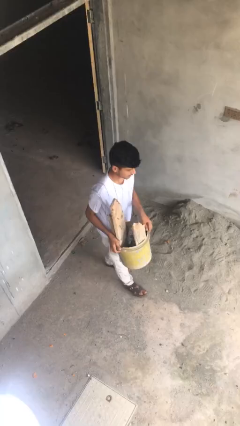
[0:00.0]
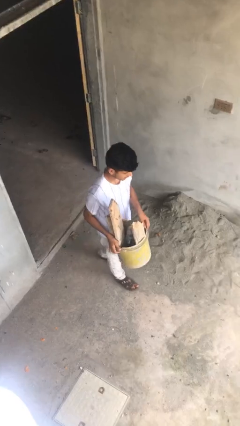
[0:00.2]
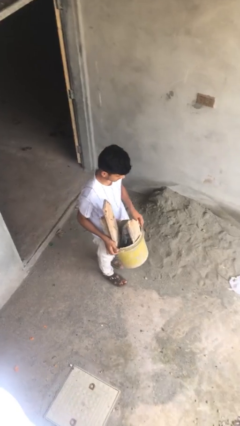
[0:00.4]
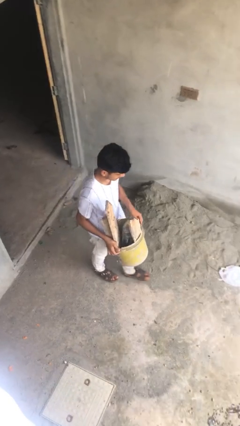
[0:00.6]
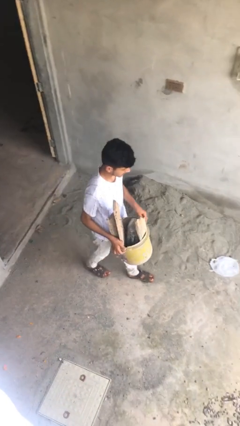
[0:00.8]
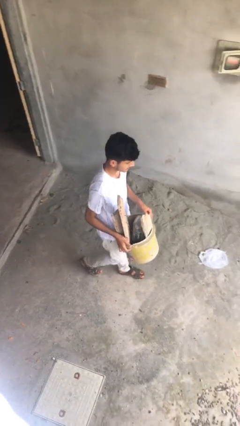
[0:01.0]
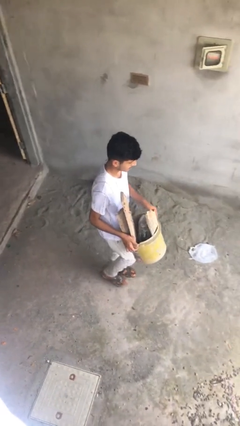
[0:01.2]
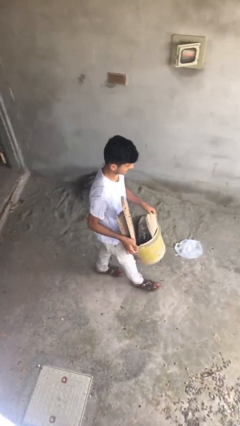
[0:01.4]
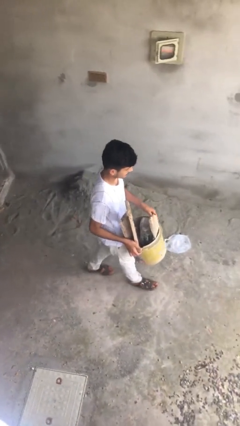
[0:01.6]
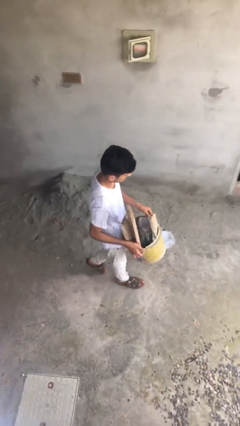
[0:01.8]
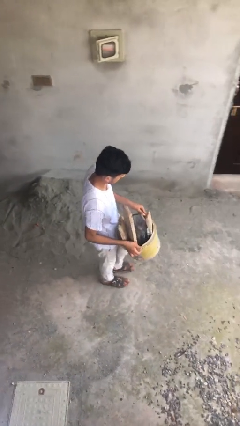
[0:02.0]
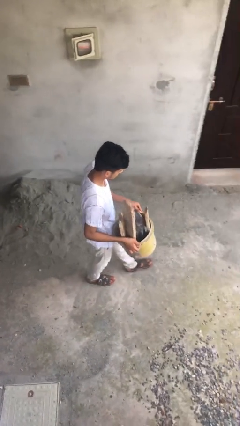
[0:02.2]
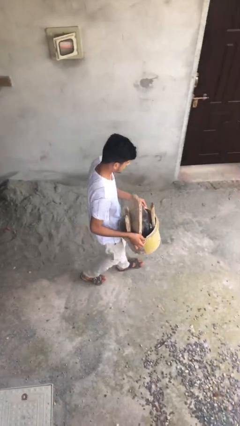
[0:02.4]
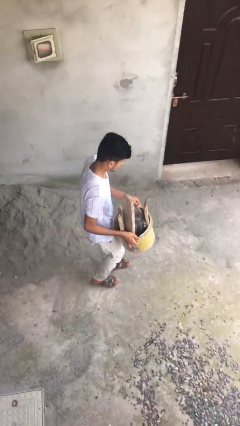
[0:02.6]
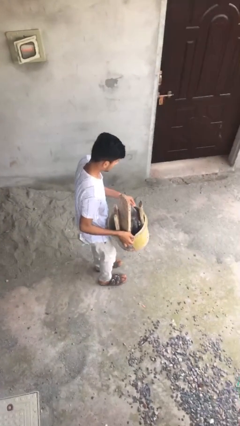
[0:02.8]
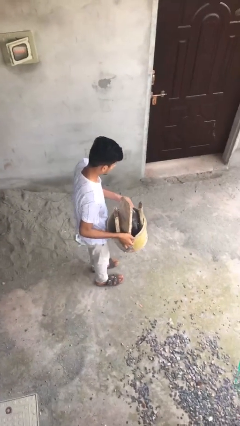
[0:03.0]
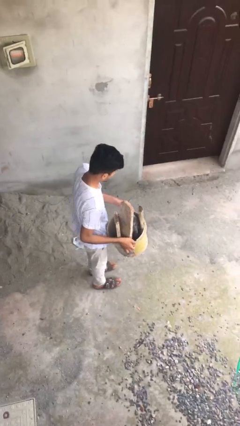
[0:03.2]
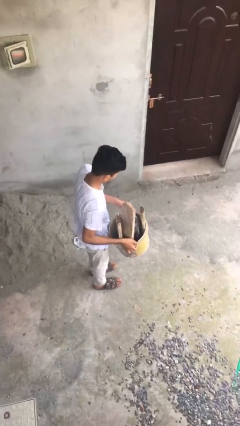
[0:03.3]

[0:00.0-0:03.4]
person carries heavy object

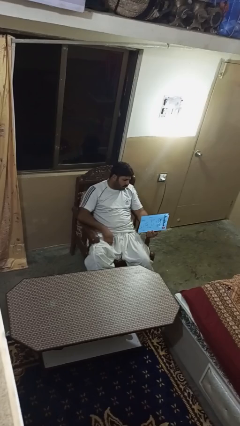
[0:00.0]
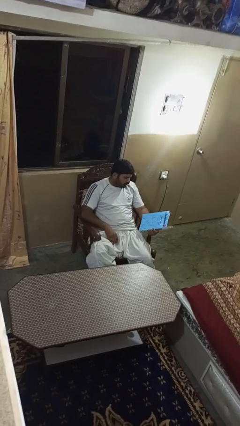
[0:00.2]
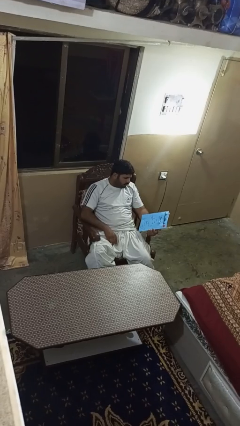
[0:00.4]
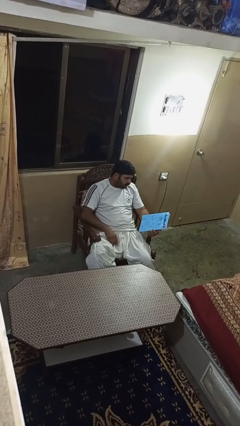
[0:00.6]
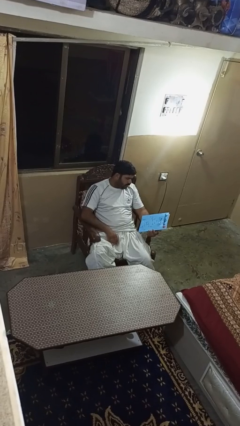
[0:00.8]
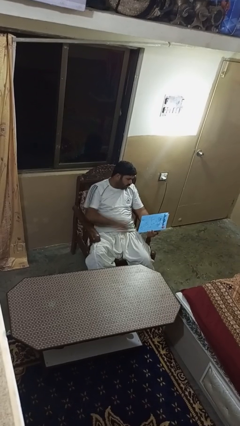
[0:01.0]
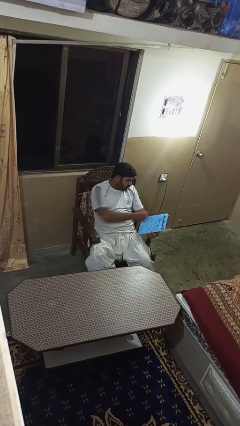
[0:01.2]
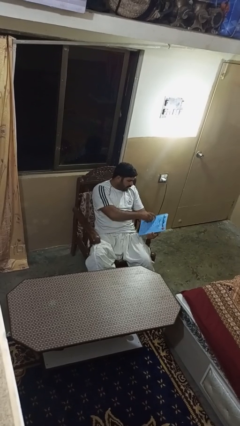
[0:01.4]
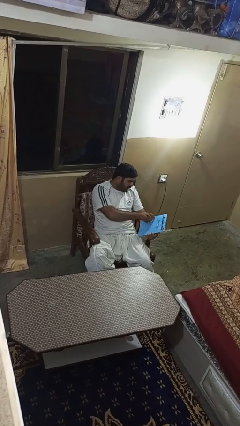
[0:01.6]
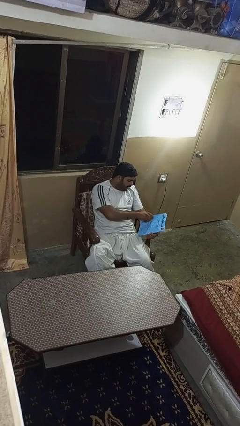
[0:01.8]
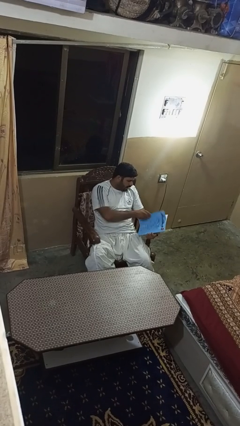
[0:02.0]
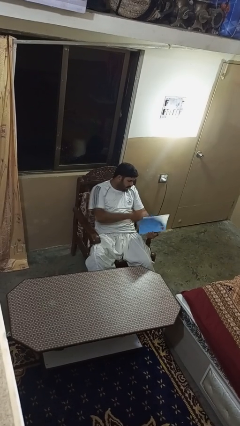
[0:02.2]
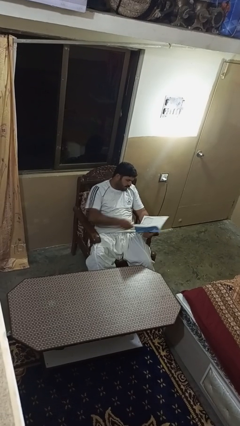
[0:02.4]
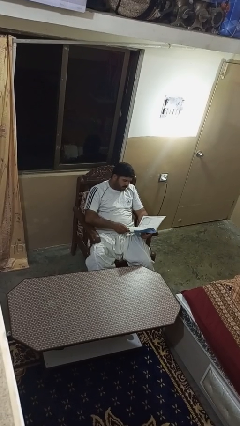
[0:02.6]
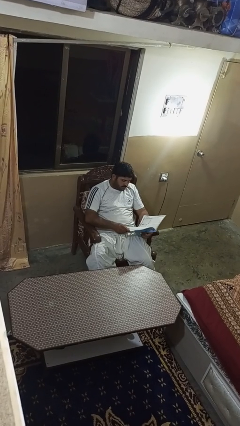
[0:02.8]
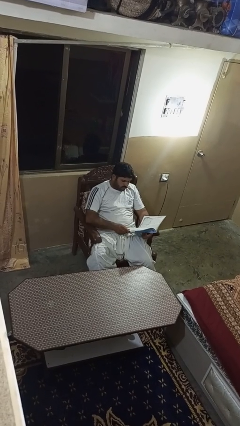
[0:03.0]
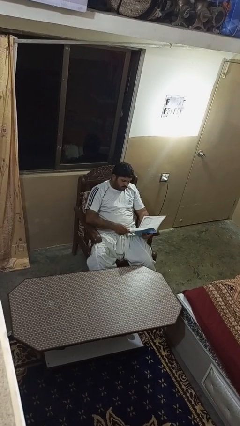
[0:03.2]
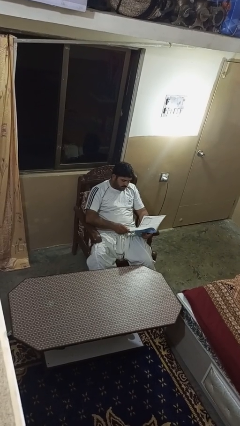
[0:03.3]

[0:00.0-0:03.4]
person reads magazine

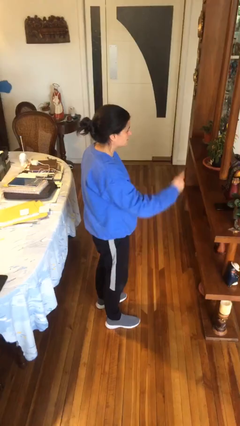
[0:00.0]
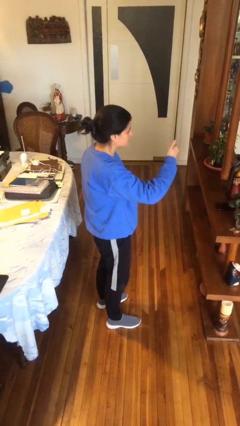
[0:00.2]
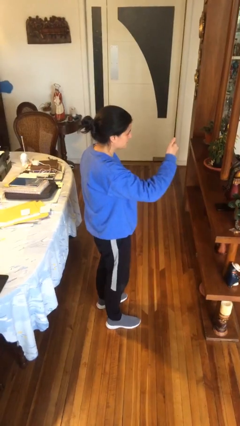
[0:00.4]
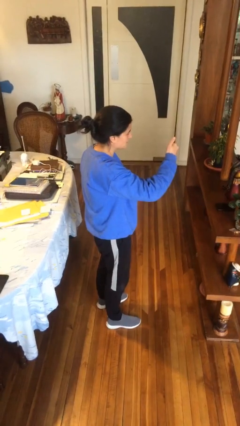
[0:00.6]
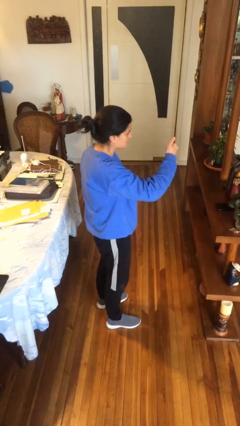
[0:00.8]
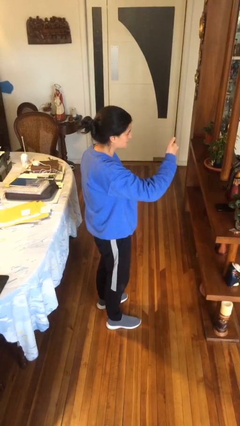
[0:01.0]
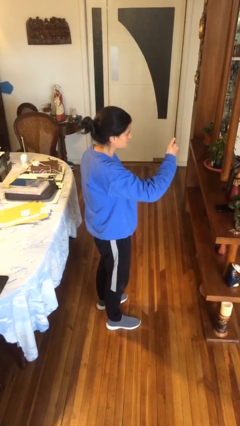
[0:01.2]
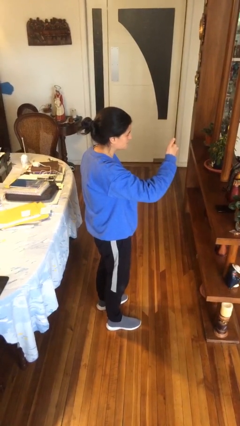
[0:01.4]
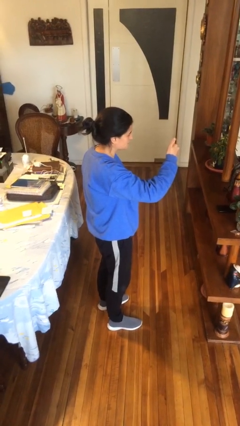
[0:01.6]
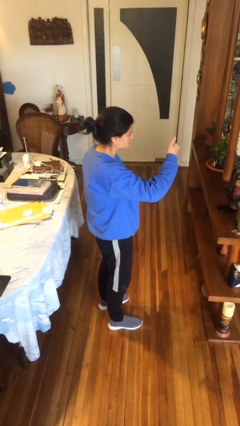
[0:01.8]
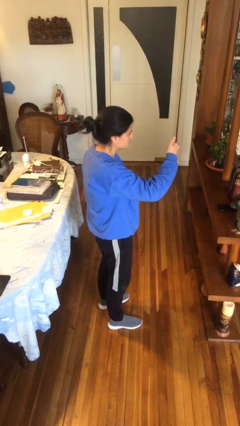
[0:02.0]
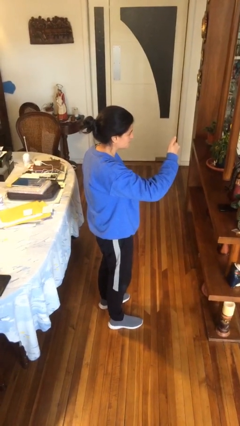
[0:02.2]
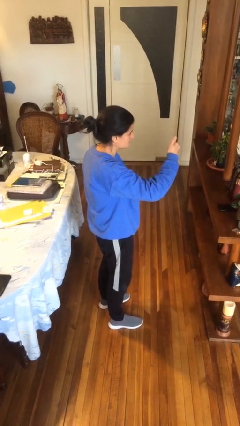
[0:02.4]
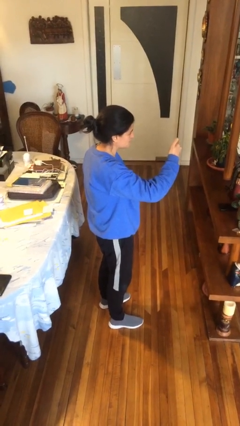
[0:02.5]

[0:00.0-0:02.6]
person gestures thumbs up

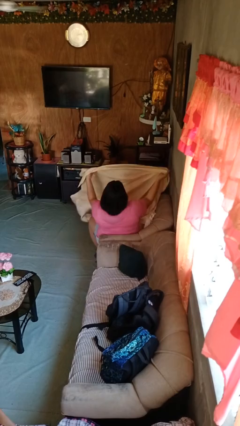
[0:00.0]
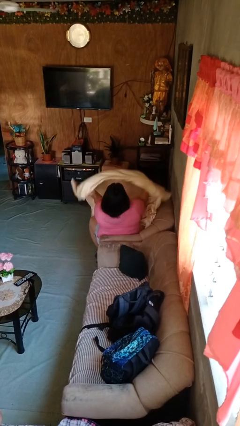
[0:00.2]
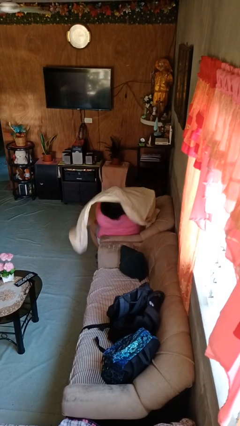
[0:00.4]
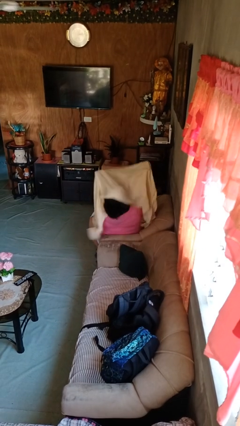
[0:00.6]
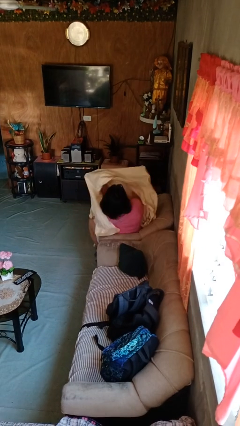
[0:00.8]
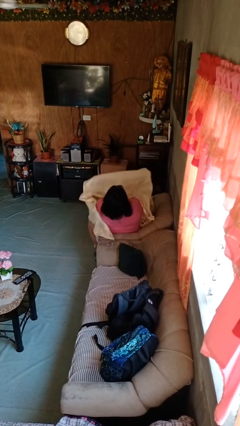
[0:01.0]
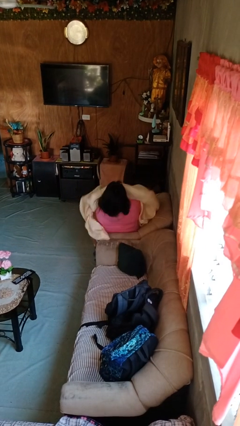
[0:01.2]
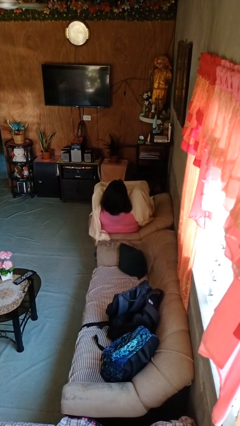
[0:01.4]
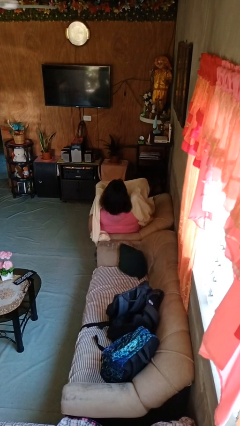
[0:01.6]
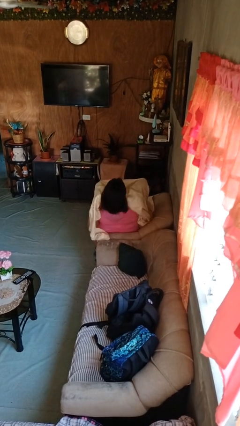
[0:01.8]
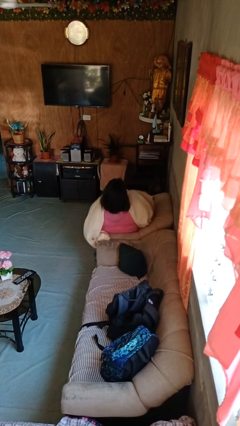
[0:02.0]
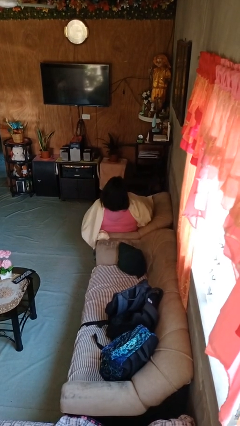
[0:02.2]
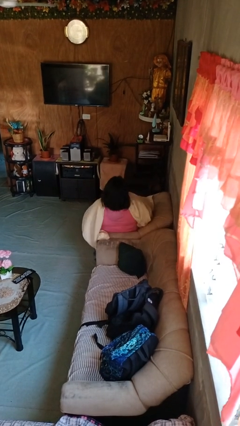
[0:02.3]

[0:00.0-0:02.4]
person covers with blanket

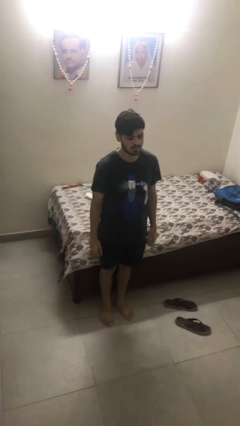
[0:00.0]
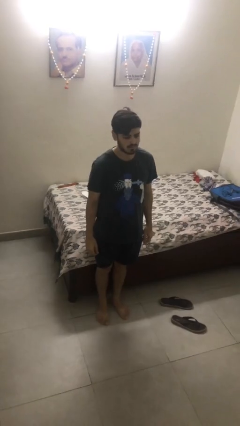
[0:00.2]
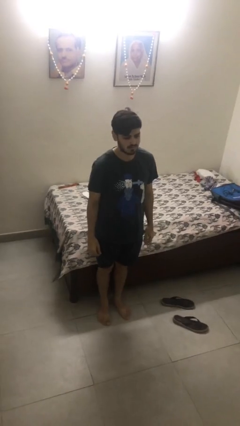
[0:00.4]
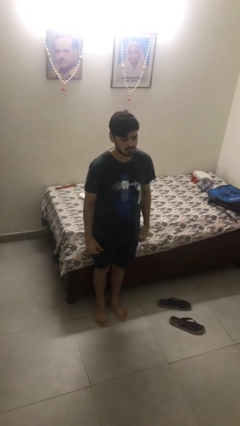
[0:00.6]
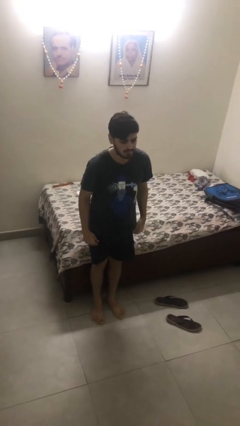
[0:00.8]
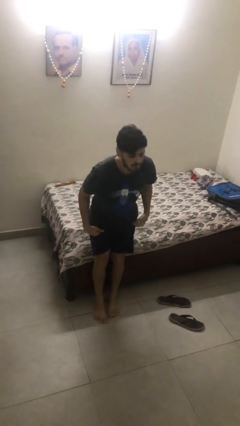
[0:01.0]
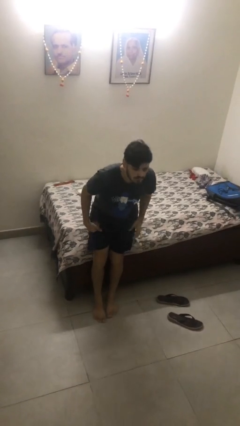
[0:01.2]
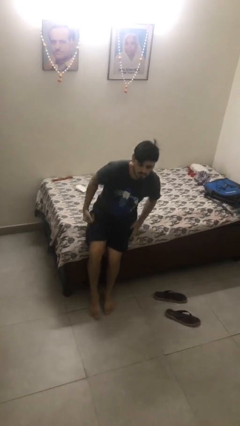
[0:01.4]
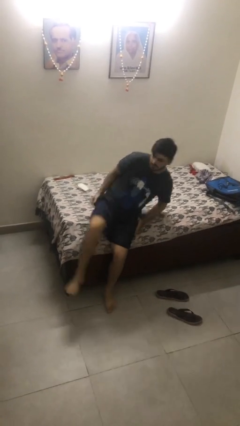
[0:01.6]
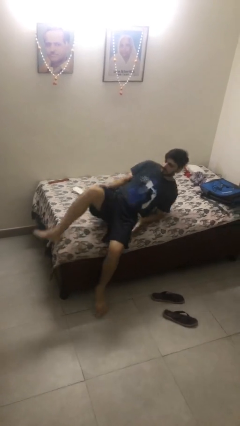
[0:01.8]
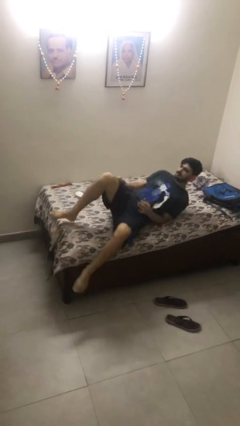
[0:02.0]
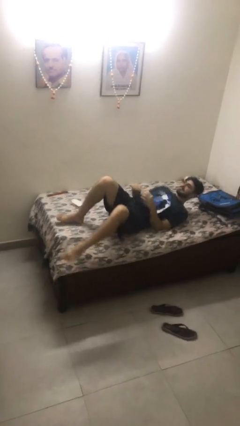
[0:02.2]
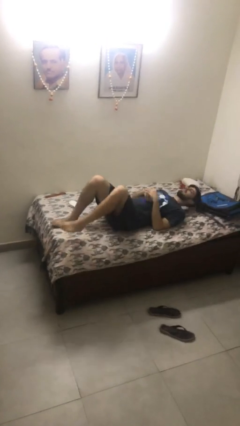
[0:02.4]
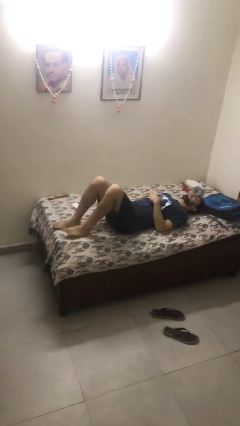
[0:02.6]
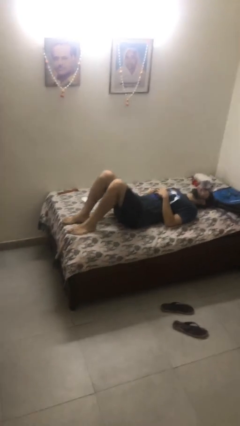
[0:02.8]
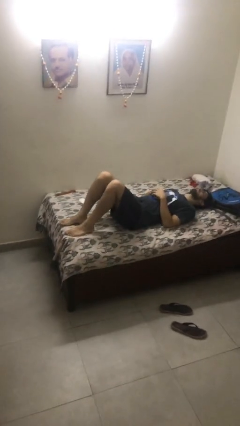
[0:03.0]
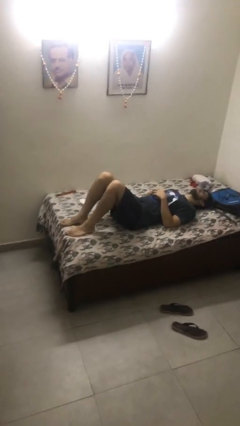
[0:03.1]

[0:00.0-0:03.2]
person lies down on bed

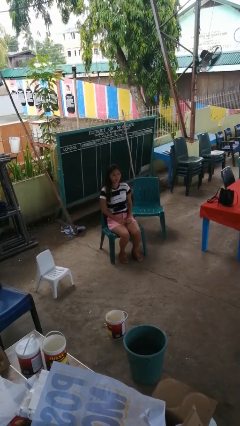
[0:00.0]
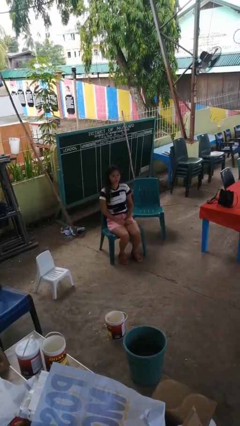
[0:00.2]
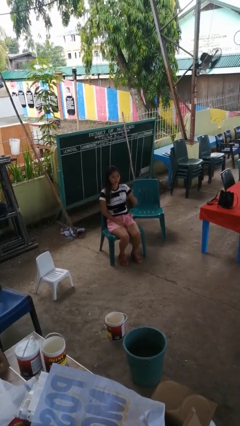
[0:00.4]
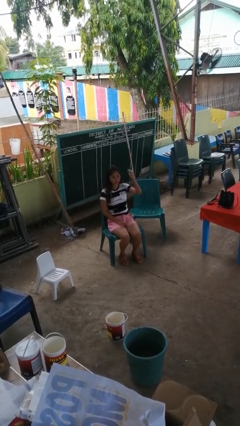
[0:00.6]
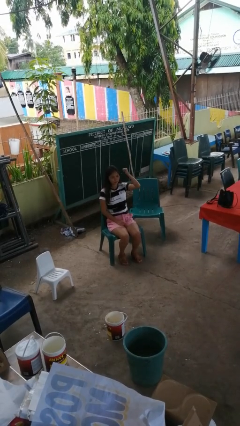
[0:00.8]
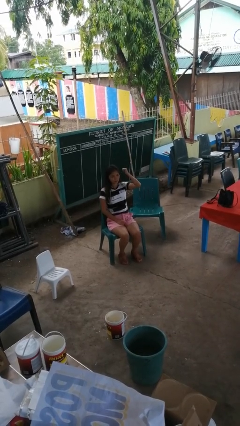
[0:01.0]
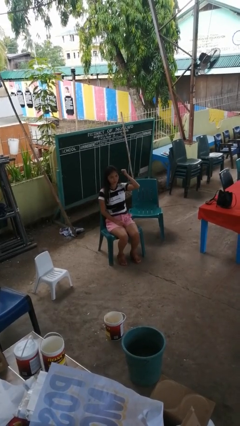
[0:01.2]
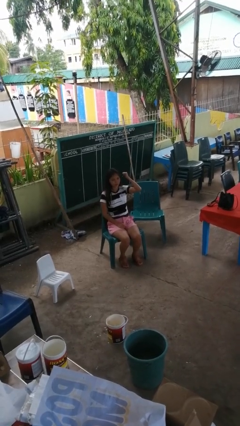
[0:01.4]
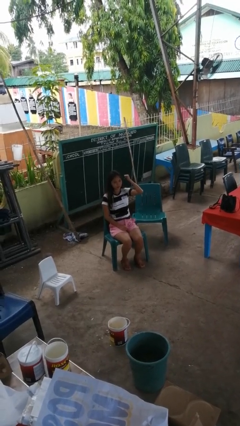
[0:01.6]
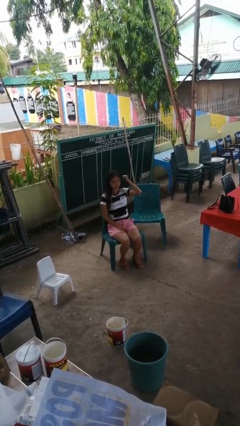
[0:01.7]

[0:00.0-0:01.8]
person gestures behind me

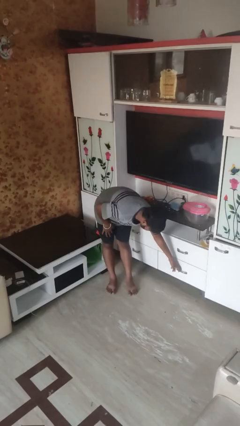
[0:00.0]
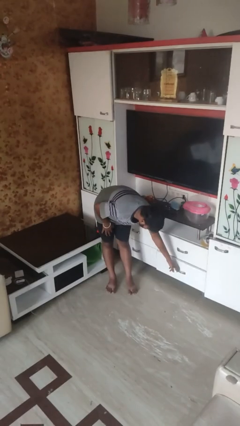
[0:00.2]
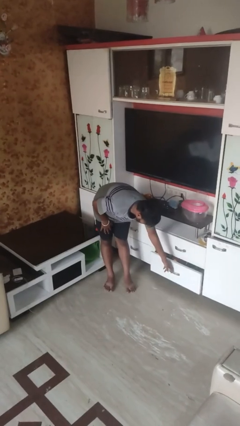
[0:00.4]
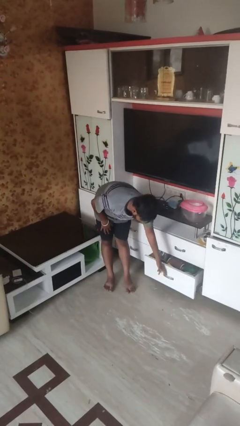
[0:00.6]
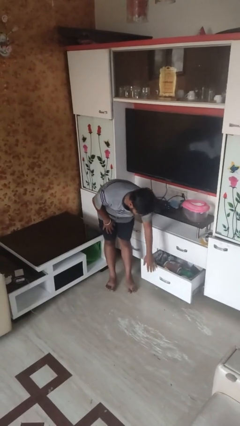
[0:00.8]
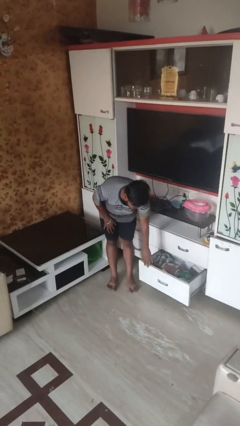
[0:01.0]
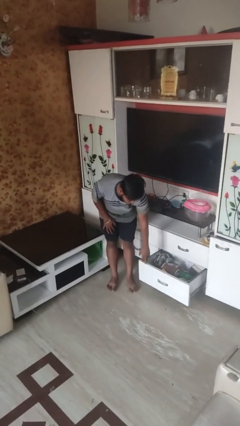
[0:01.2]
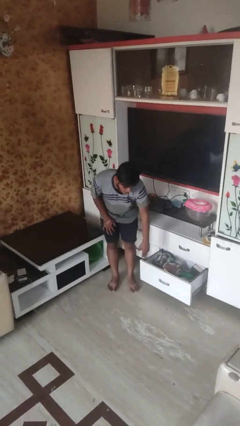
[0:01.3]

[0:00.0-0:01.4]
person opens dresser drawer
